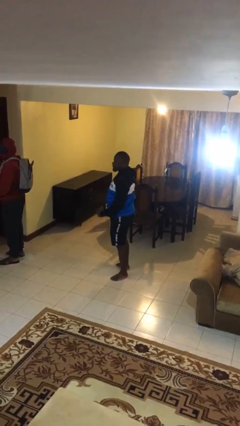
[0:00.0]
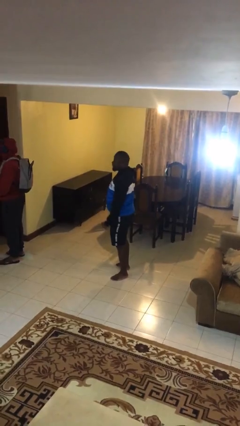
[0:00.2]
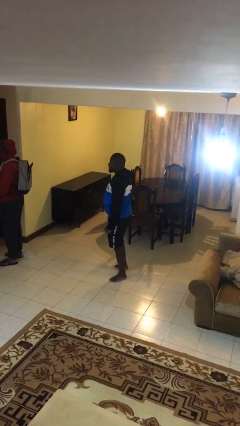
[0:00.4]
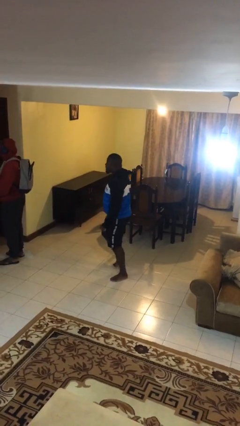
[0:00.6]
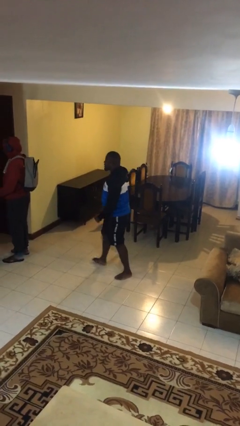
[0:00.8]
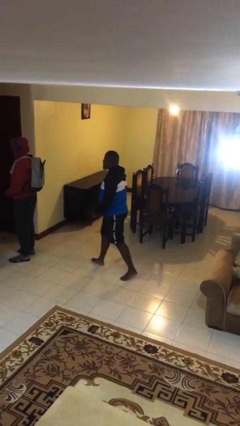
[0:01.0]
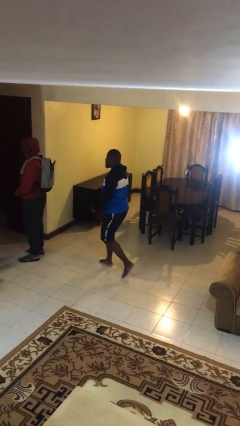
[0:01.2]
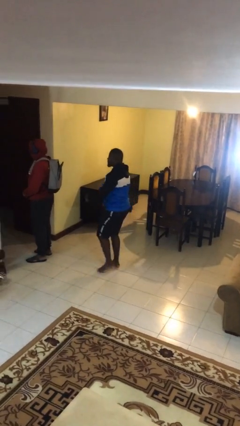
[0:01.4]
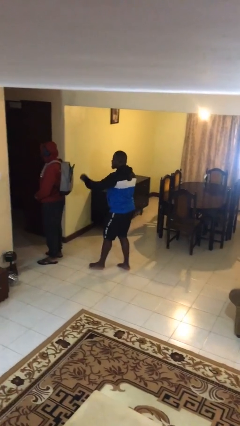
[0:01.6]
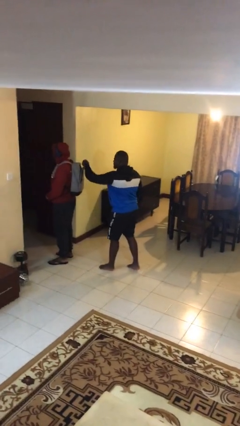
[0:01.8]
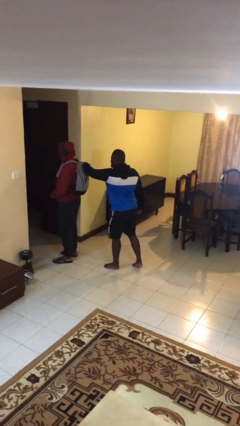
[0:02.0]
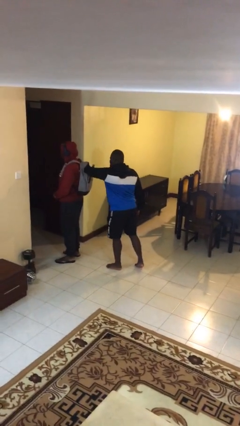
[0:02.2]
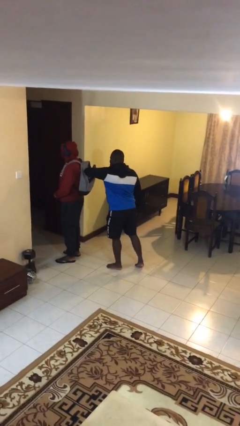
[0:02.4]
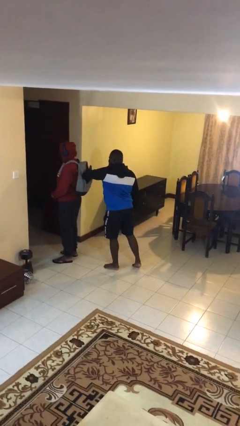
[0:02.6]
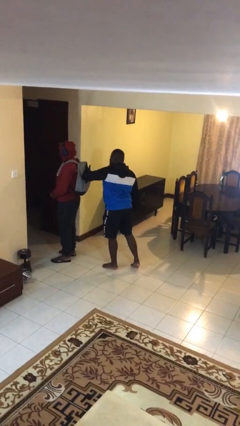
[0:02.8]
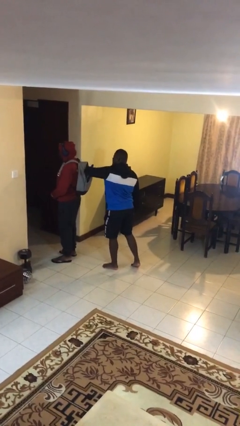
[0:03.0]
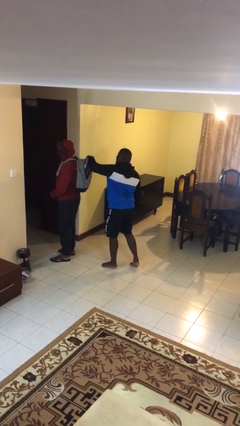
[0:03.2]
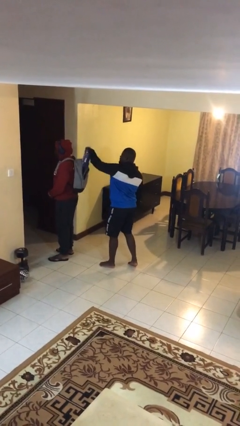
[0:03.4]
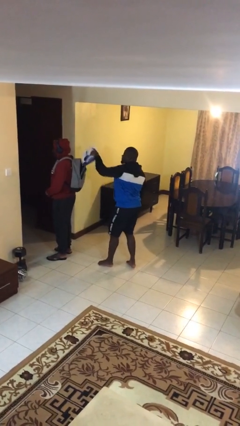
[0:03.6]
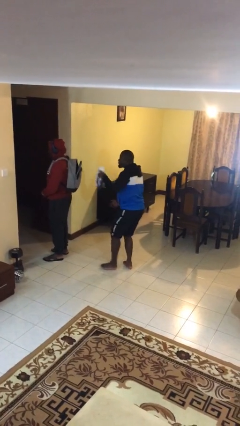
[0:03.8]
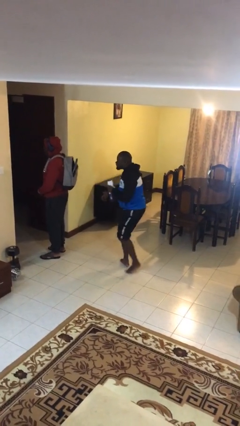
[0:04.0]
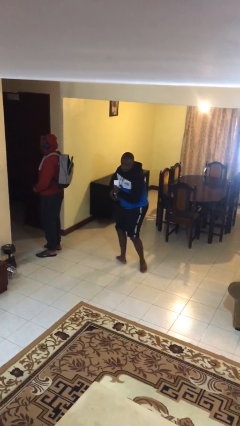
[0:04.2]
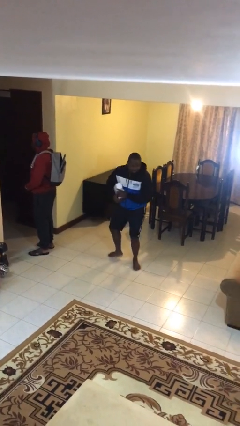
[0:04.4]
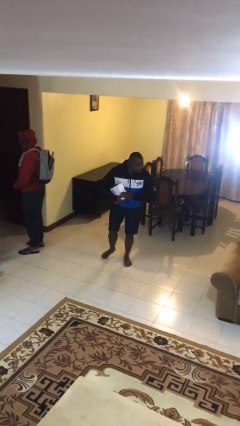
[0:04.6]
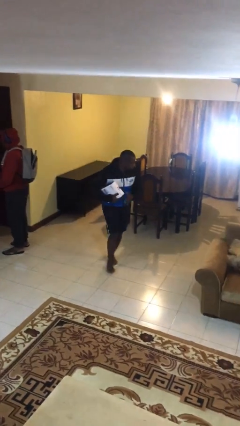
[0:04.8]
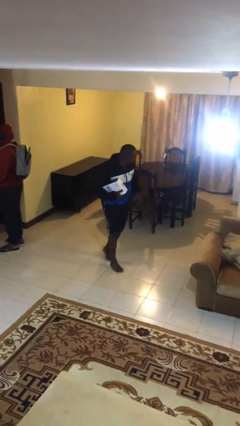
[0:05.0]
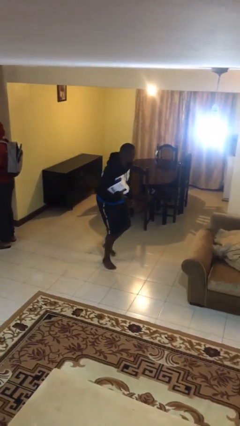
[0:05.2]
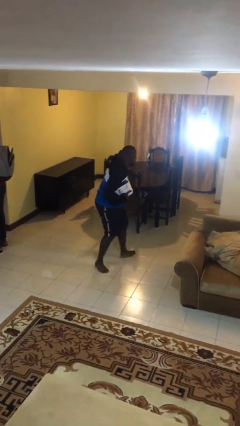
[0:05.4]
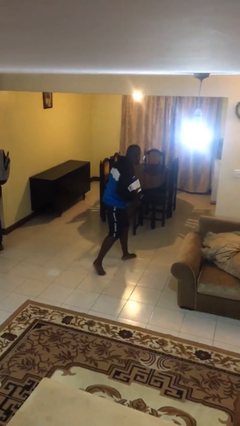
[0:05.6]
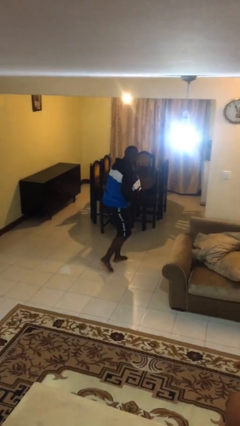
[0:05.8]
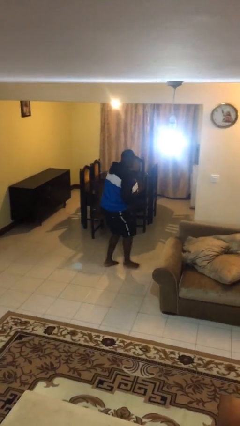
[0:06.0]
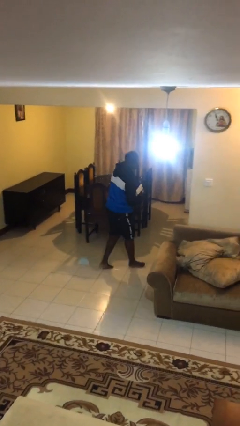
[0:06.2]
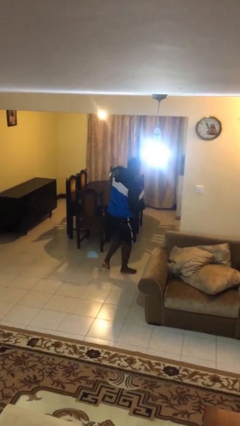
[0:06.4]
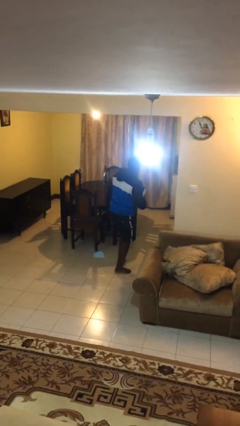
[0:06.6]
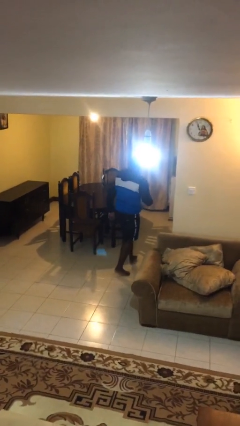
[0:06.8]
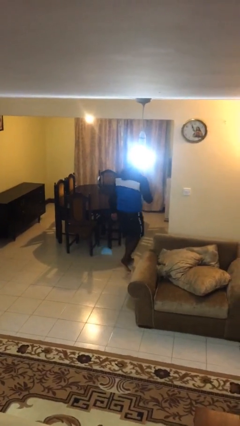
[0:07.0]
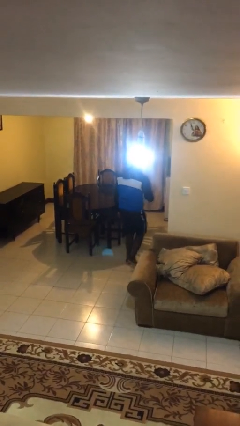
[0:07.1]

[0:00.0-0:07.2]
person steals object from person

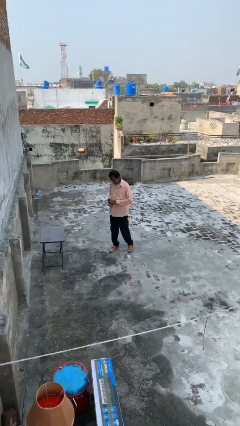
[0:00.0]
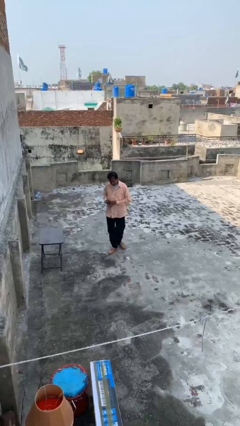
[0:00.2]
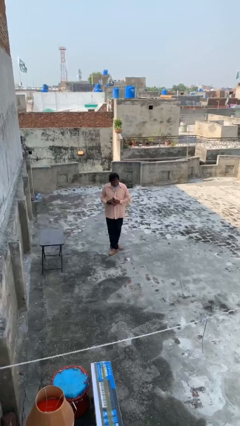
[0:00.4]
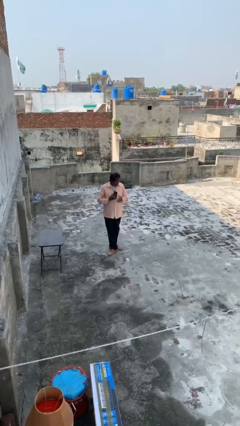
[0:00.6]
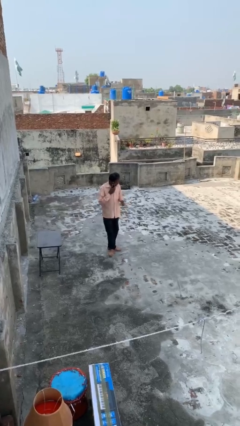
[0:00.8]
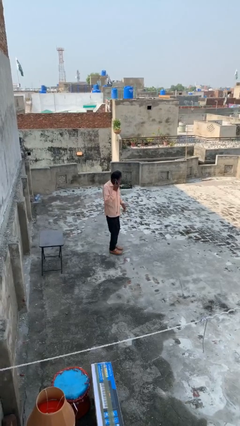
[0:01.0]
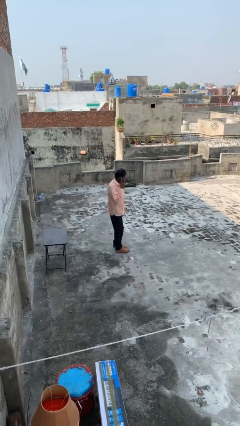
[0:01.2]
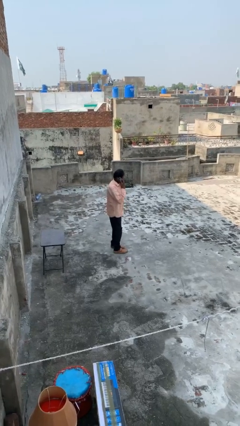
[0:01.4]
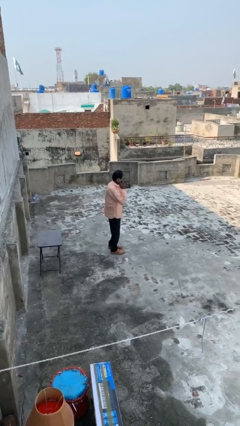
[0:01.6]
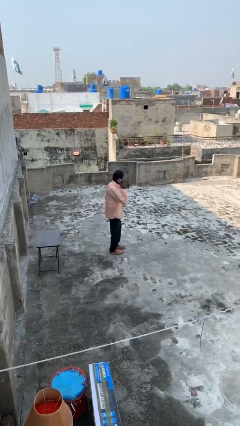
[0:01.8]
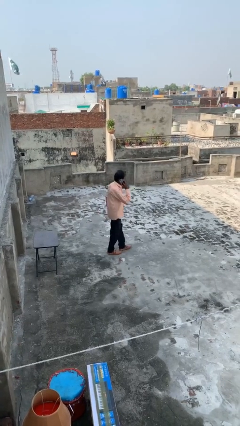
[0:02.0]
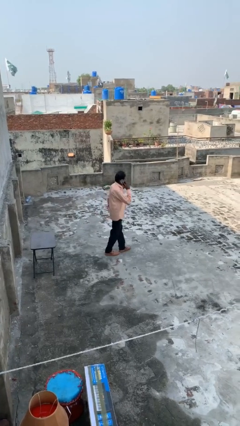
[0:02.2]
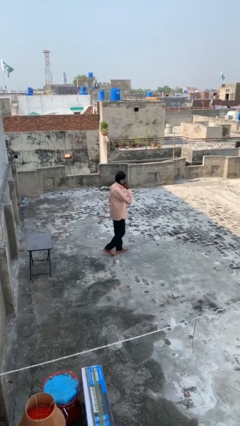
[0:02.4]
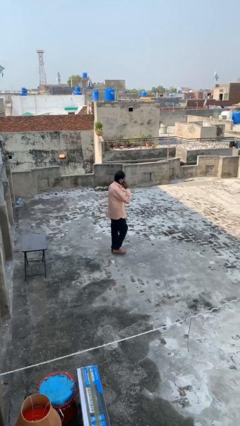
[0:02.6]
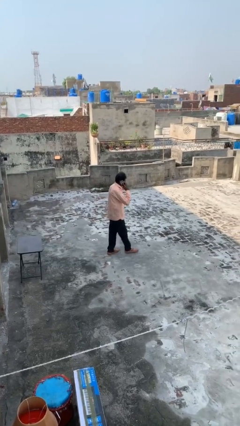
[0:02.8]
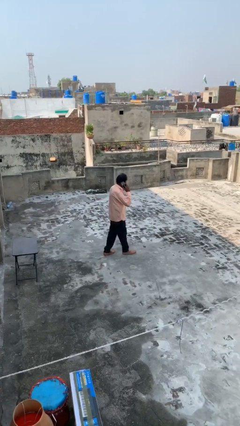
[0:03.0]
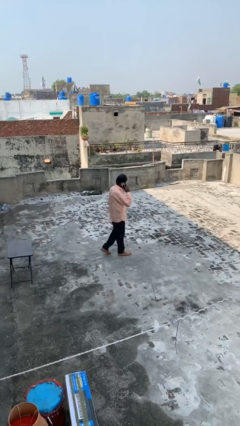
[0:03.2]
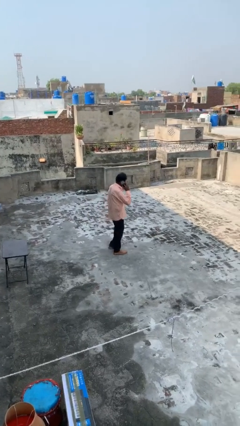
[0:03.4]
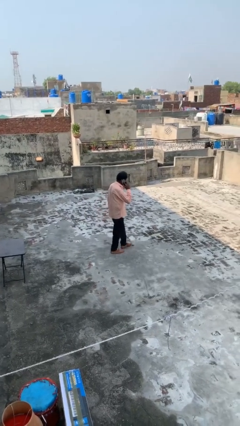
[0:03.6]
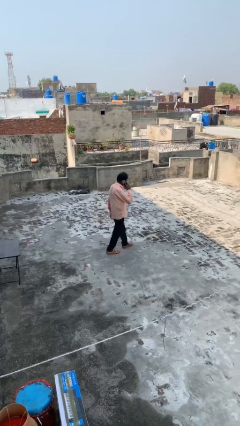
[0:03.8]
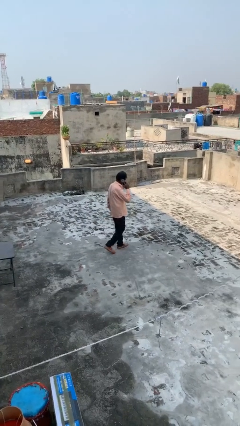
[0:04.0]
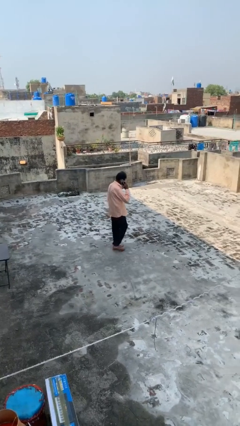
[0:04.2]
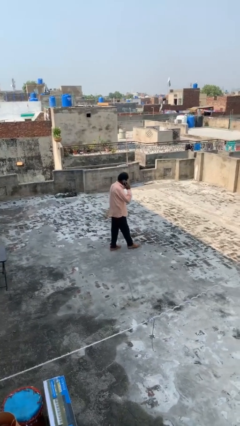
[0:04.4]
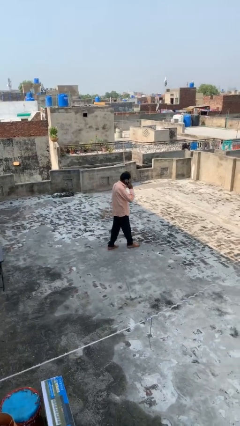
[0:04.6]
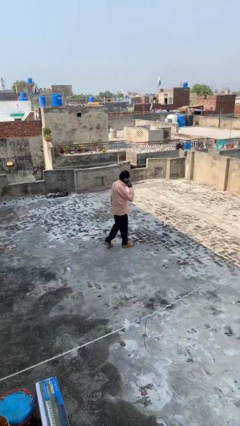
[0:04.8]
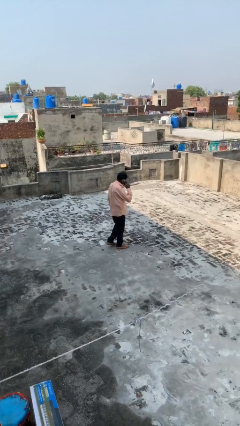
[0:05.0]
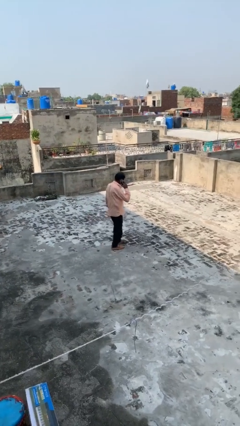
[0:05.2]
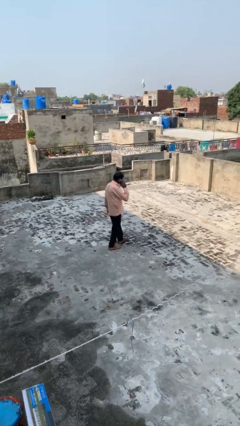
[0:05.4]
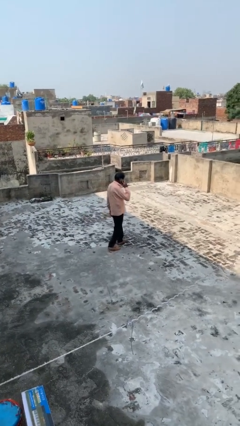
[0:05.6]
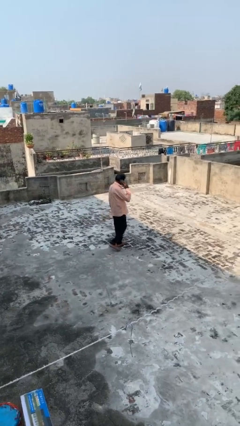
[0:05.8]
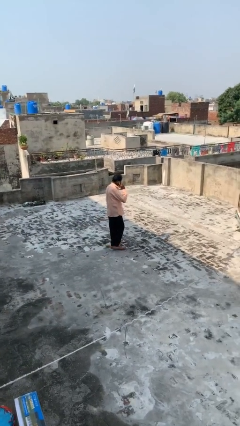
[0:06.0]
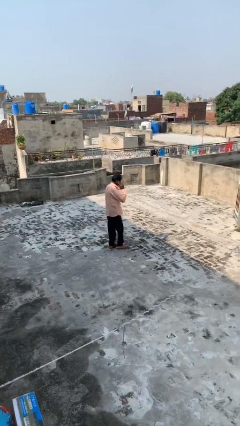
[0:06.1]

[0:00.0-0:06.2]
person talks on phone

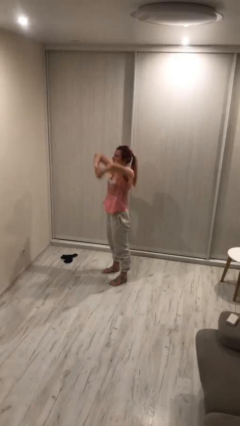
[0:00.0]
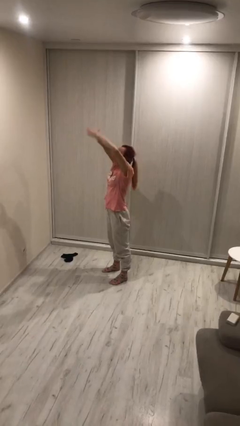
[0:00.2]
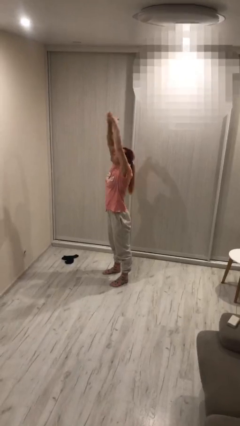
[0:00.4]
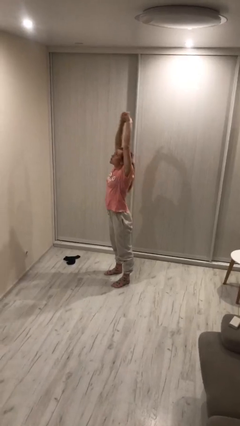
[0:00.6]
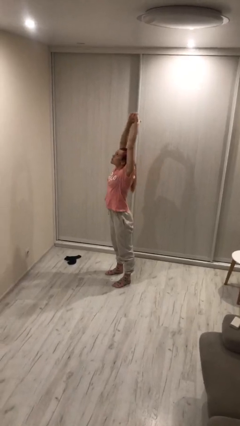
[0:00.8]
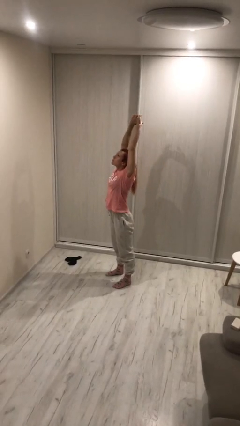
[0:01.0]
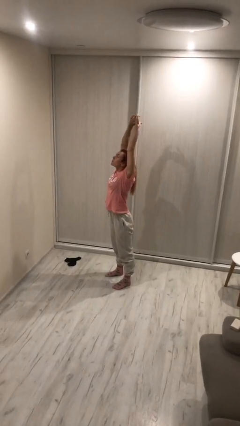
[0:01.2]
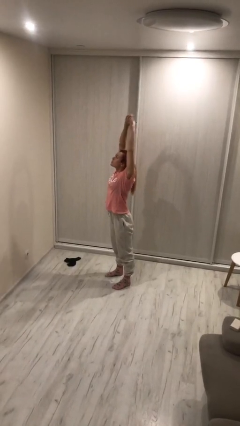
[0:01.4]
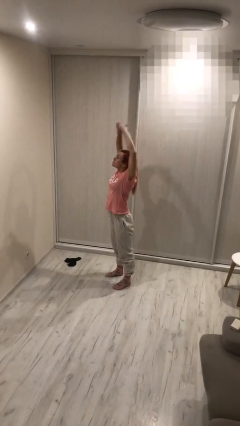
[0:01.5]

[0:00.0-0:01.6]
person stretches arms over head

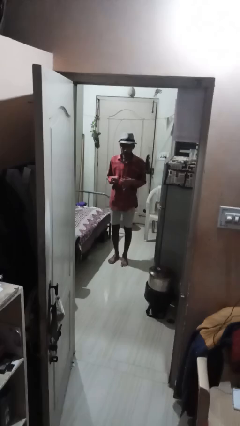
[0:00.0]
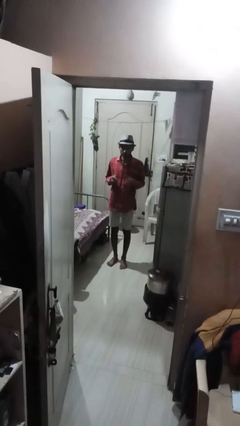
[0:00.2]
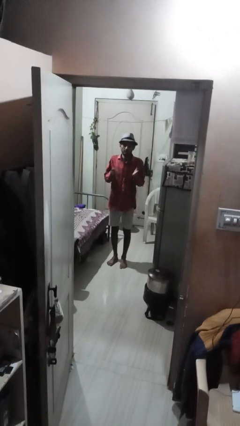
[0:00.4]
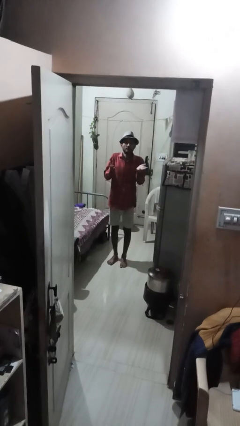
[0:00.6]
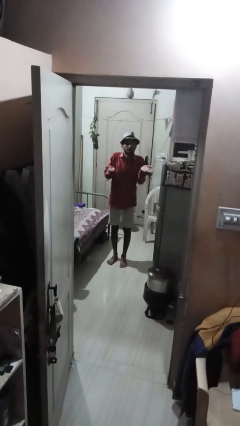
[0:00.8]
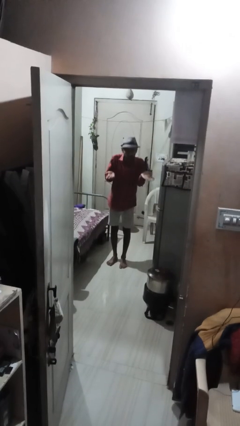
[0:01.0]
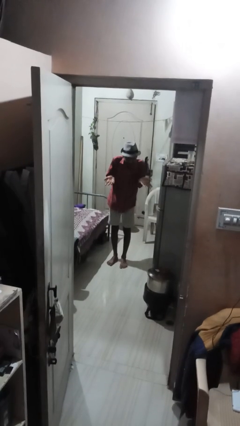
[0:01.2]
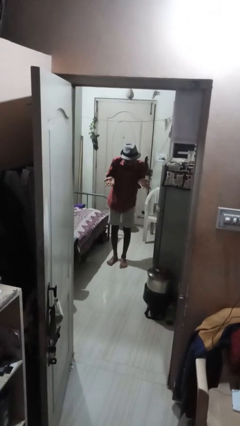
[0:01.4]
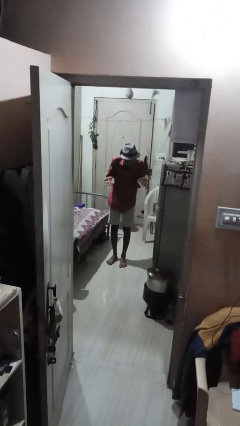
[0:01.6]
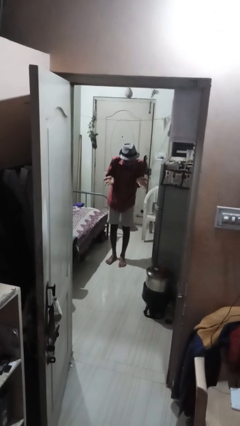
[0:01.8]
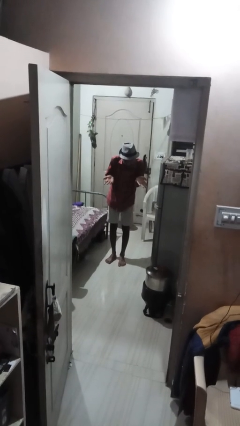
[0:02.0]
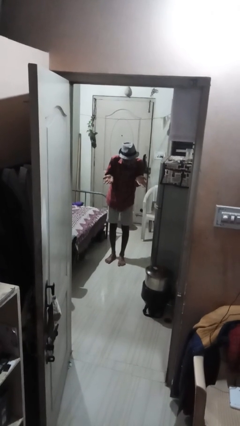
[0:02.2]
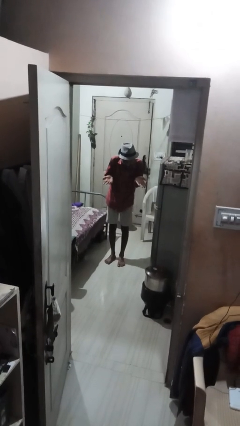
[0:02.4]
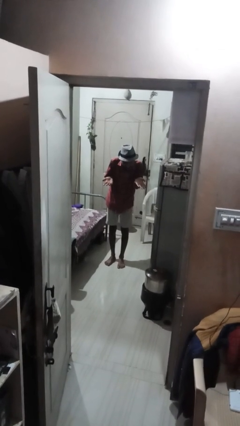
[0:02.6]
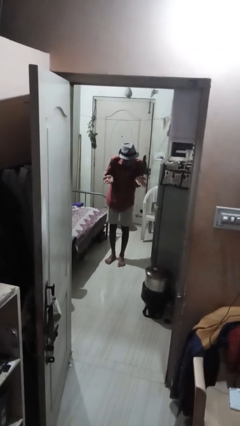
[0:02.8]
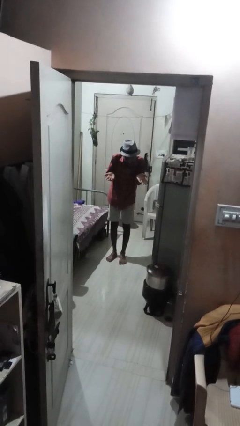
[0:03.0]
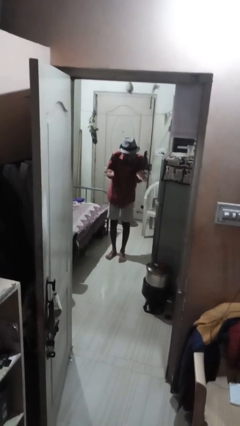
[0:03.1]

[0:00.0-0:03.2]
person shrugs
